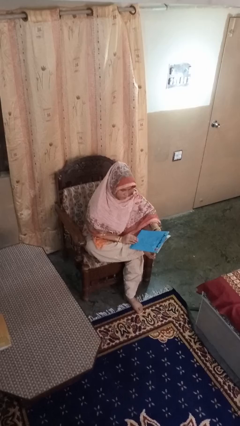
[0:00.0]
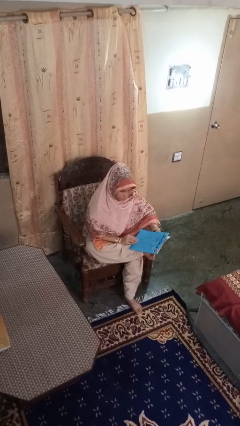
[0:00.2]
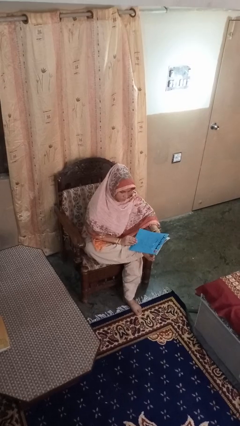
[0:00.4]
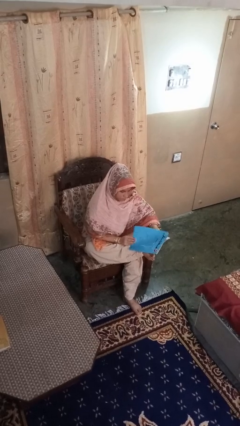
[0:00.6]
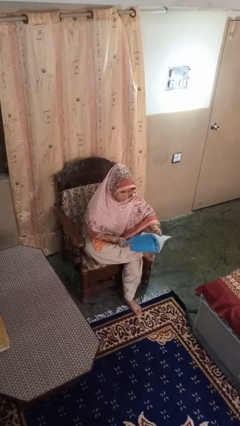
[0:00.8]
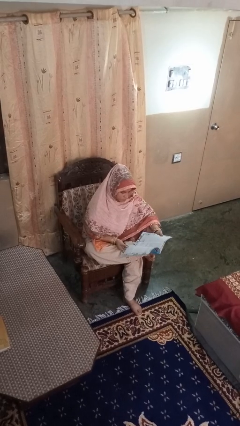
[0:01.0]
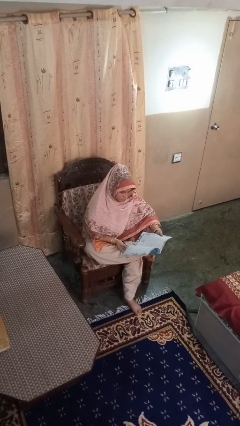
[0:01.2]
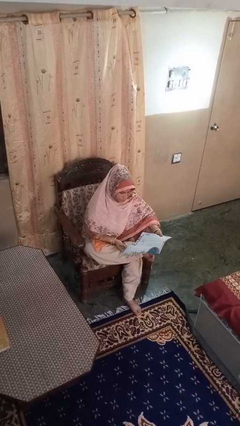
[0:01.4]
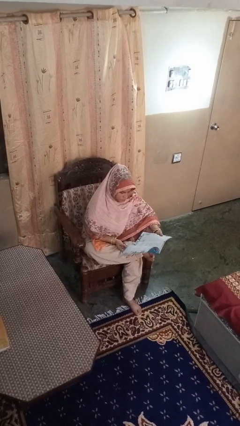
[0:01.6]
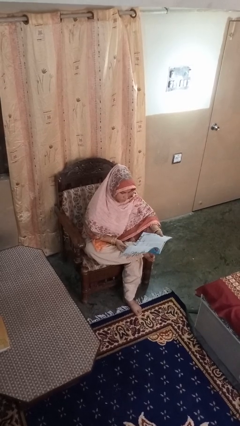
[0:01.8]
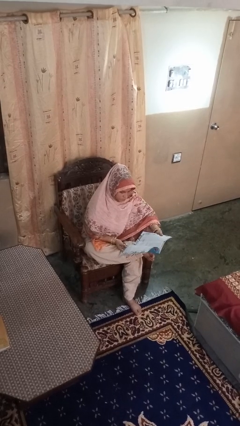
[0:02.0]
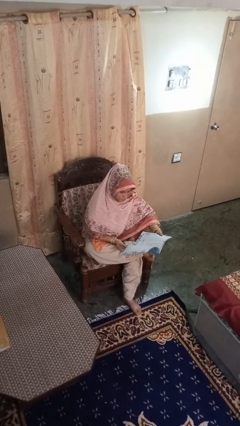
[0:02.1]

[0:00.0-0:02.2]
person reads magazine

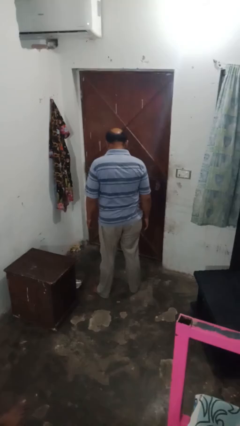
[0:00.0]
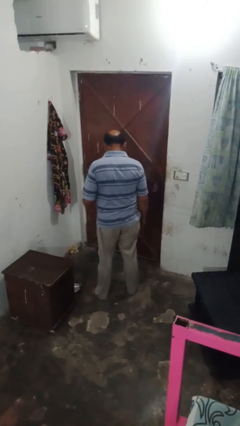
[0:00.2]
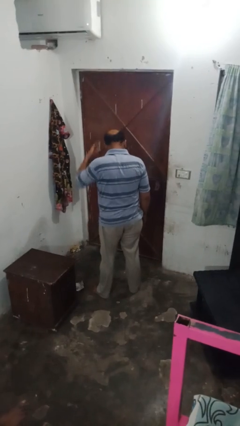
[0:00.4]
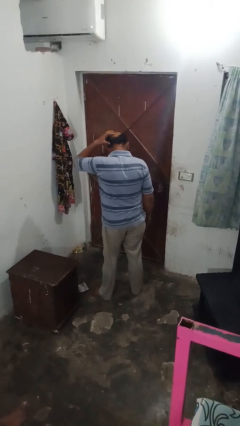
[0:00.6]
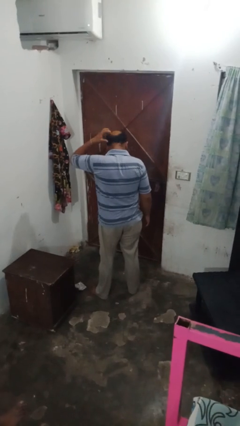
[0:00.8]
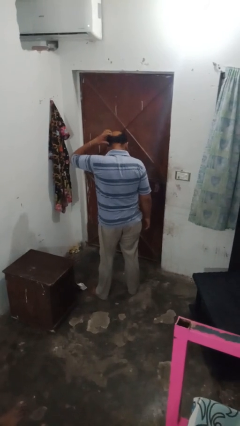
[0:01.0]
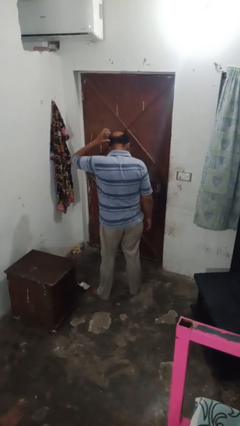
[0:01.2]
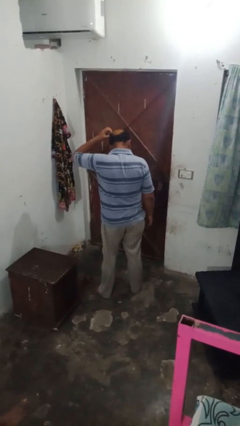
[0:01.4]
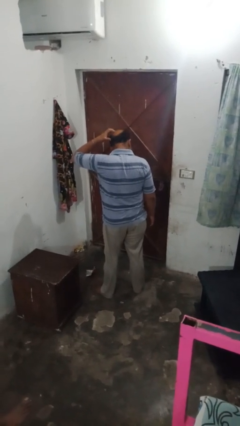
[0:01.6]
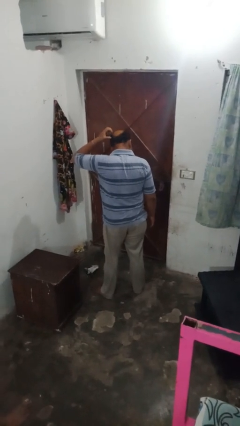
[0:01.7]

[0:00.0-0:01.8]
person strokes hair

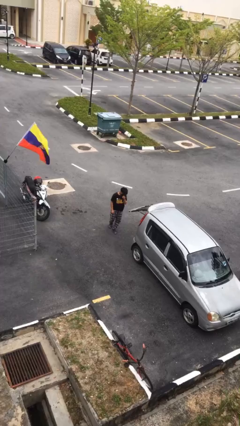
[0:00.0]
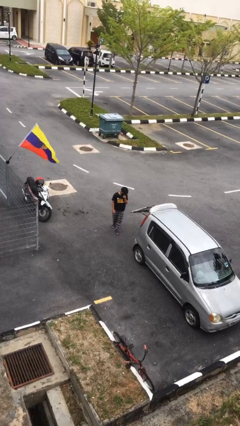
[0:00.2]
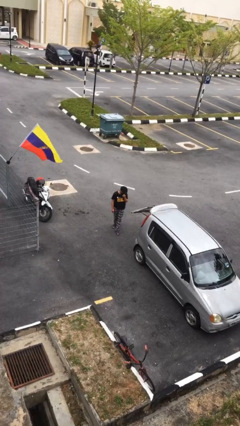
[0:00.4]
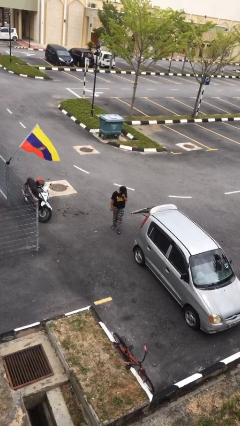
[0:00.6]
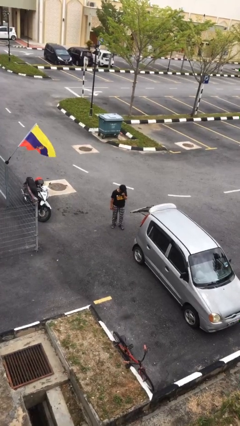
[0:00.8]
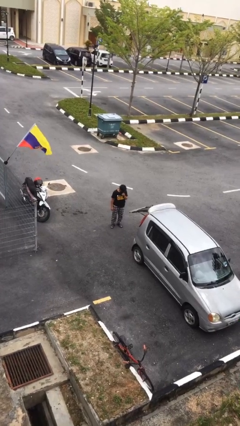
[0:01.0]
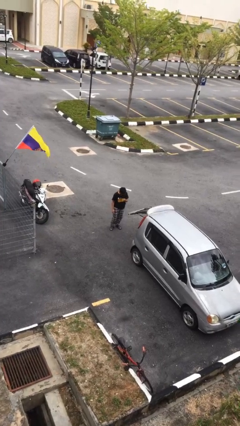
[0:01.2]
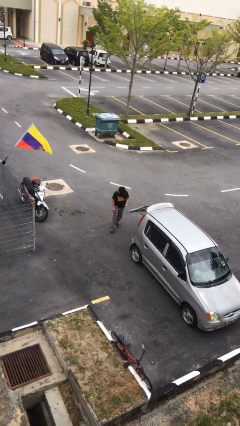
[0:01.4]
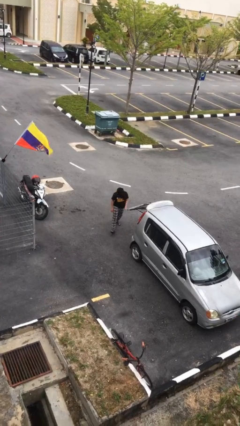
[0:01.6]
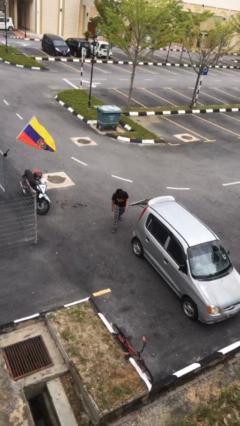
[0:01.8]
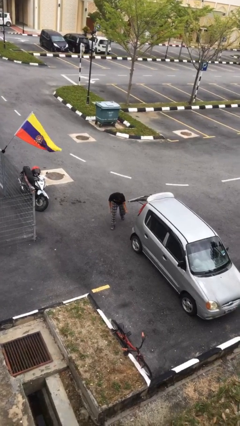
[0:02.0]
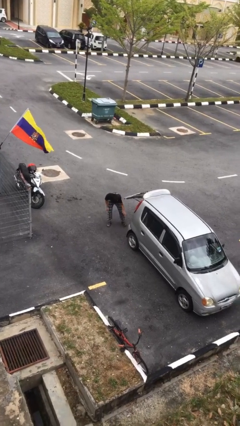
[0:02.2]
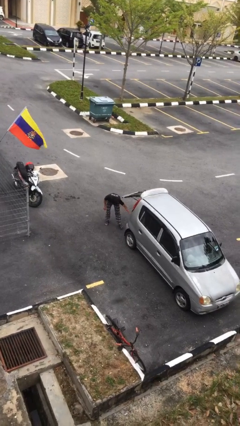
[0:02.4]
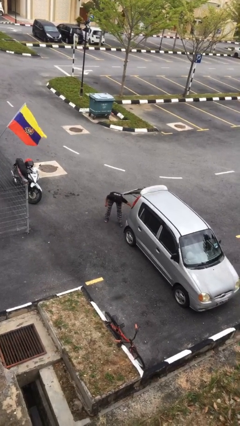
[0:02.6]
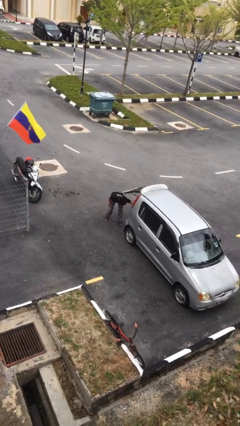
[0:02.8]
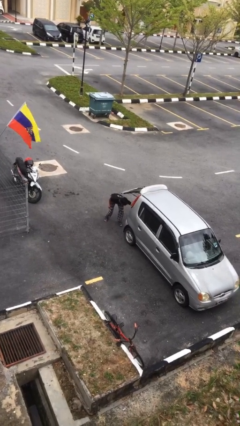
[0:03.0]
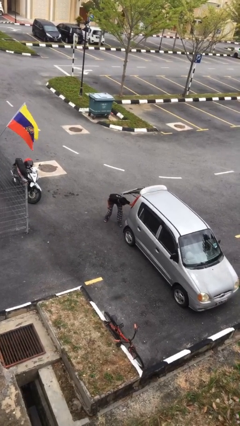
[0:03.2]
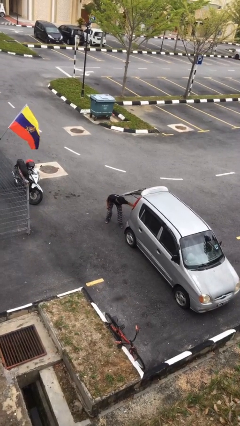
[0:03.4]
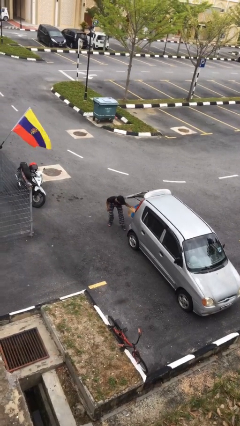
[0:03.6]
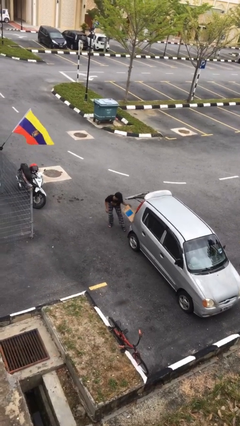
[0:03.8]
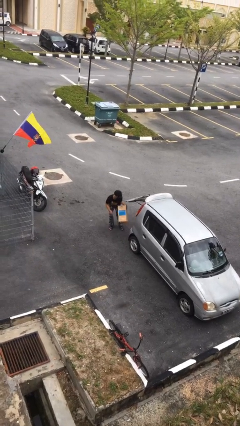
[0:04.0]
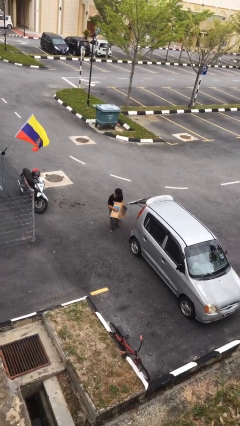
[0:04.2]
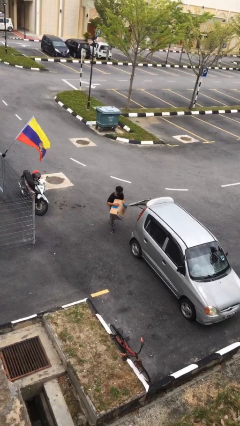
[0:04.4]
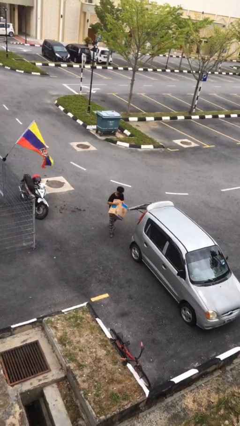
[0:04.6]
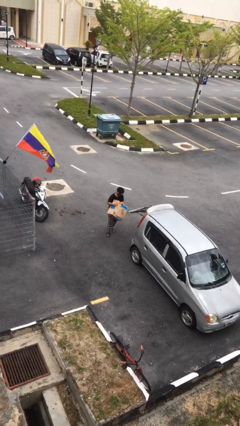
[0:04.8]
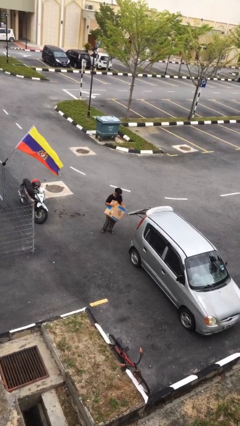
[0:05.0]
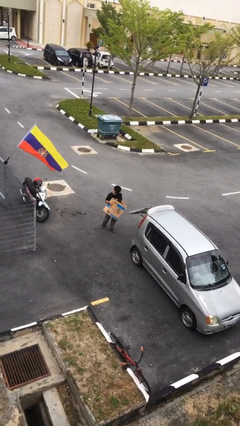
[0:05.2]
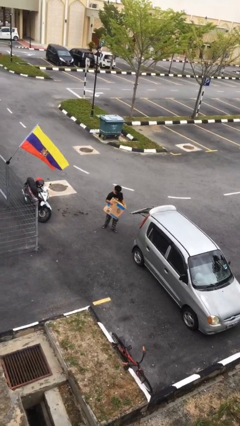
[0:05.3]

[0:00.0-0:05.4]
person unloads car

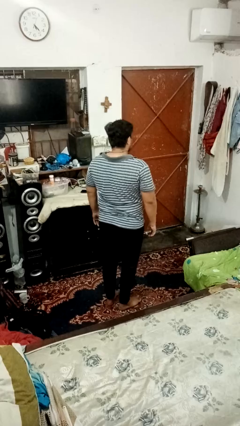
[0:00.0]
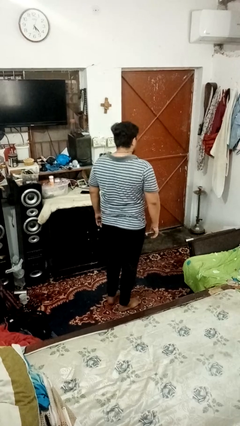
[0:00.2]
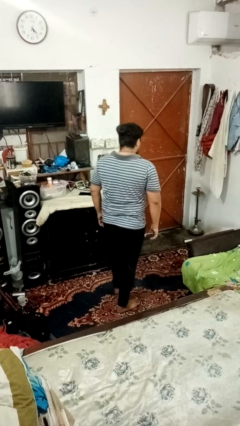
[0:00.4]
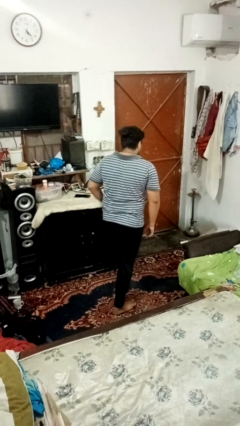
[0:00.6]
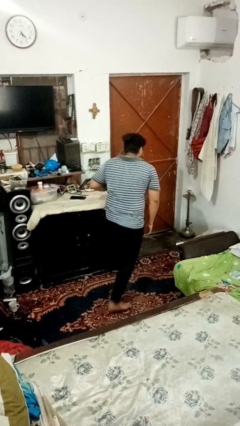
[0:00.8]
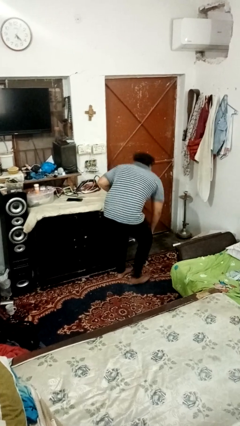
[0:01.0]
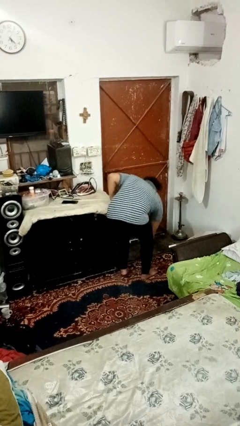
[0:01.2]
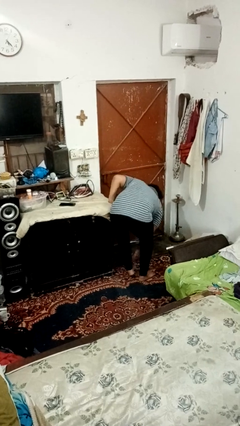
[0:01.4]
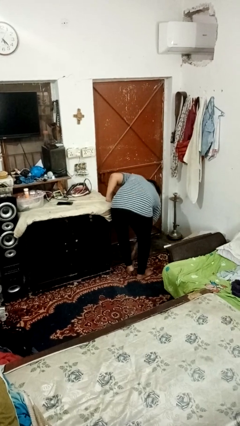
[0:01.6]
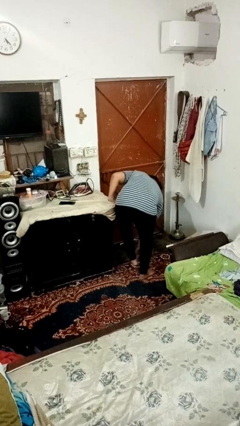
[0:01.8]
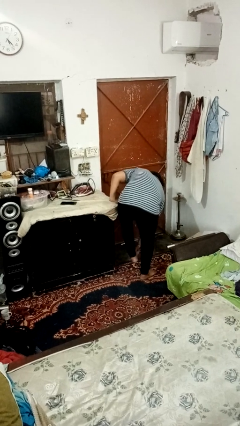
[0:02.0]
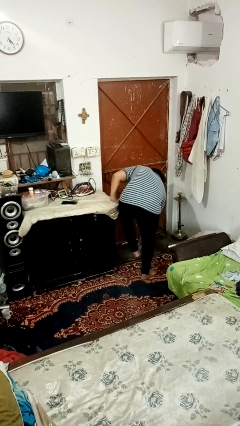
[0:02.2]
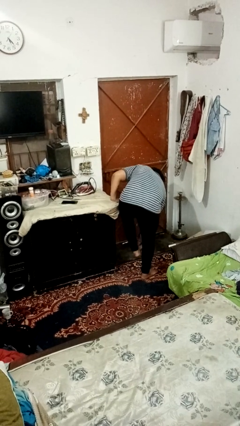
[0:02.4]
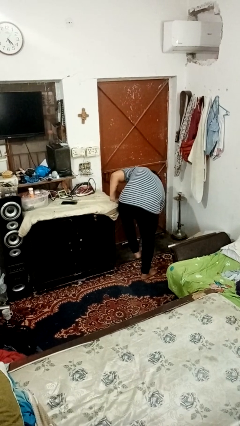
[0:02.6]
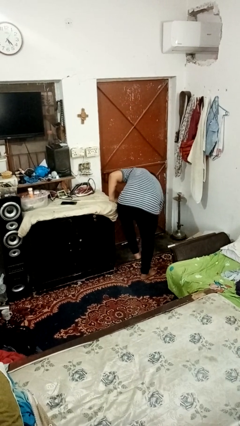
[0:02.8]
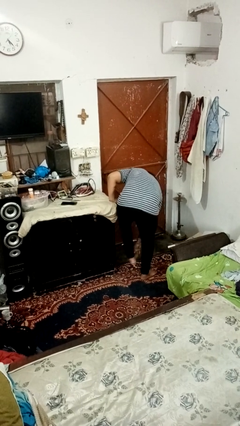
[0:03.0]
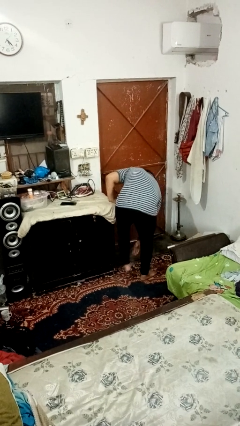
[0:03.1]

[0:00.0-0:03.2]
person stubs toe

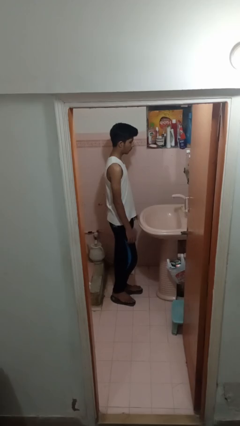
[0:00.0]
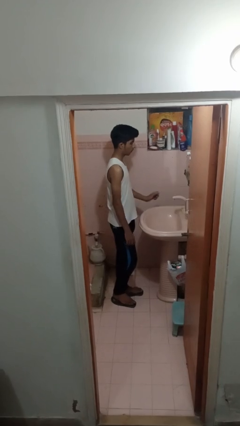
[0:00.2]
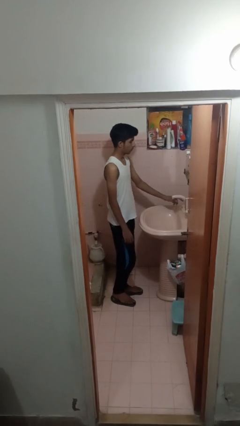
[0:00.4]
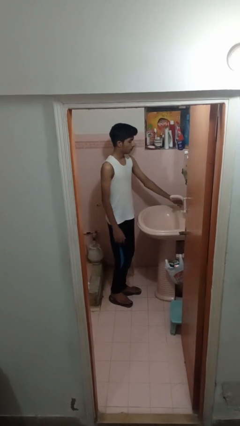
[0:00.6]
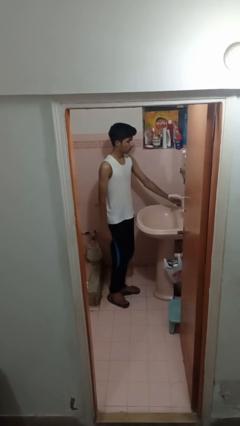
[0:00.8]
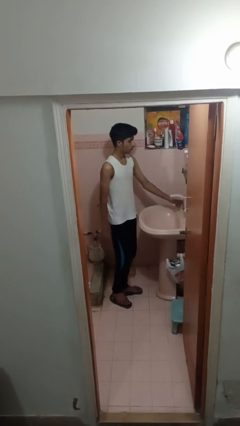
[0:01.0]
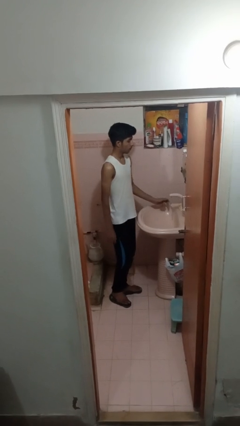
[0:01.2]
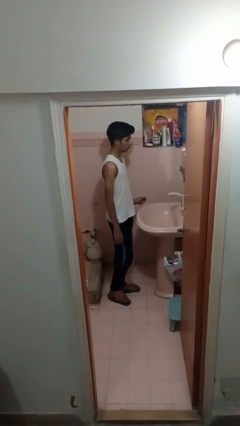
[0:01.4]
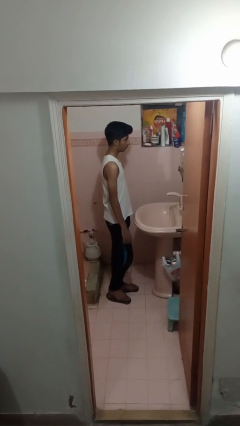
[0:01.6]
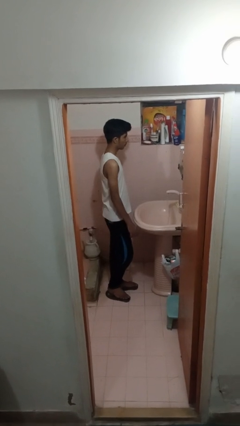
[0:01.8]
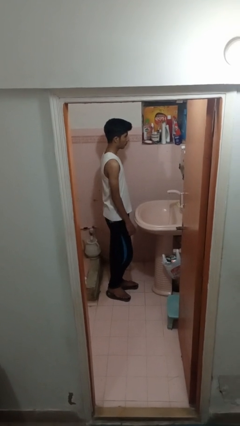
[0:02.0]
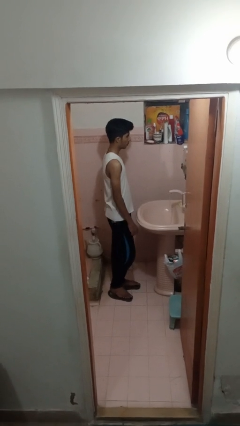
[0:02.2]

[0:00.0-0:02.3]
person turns on faucet

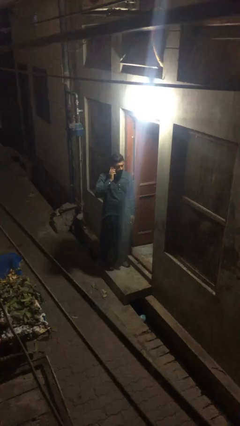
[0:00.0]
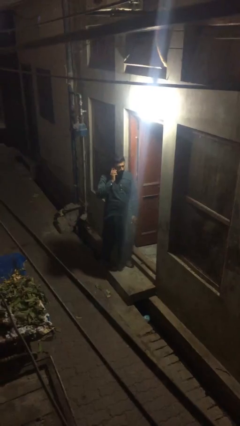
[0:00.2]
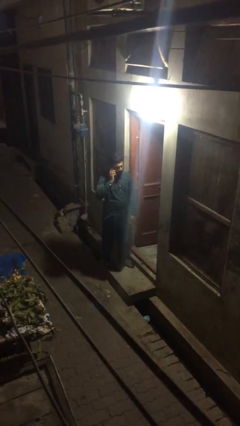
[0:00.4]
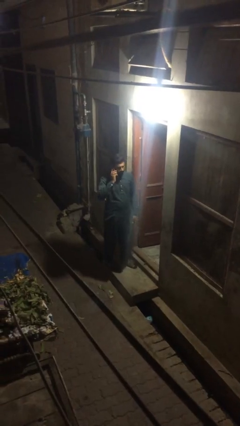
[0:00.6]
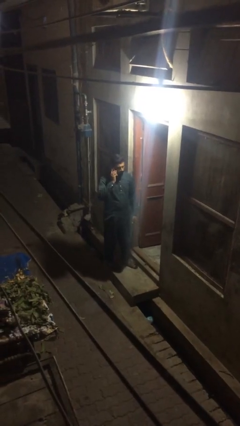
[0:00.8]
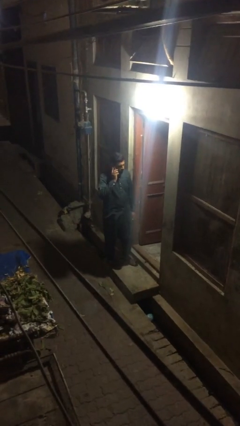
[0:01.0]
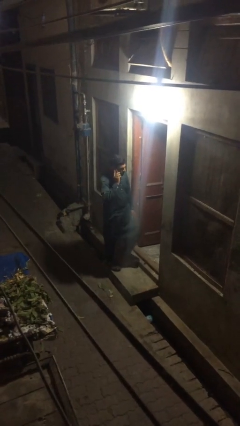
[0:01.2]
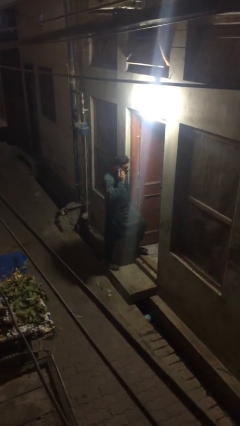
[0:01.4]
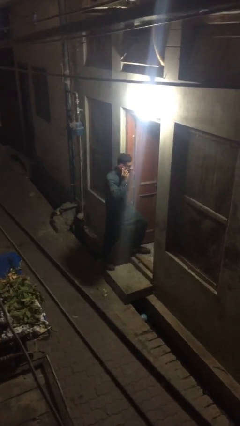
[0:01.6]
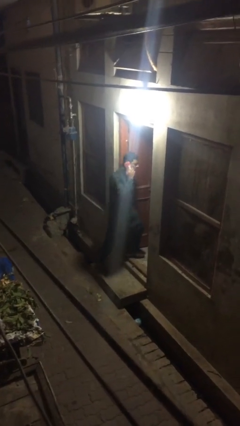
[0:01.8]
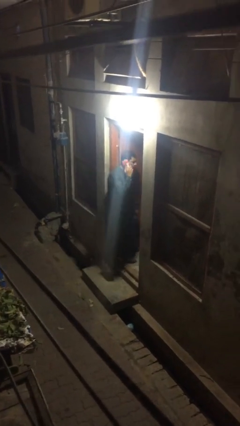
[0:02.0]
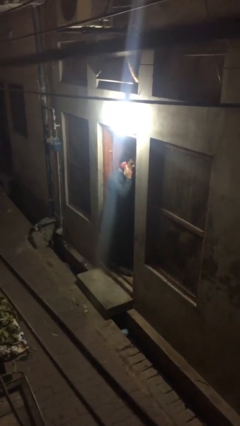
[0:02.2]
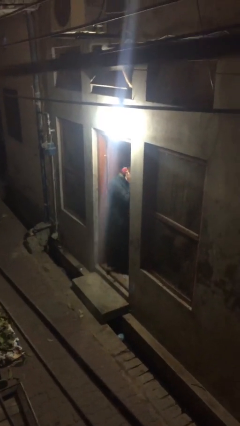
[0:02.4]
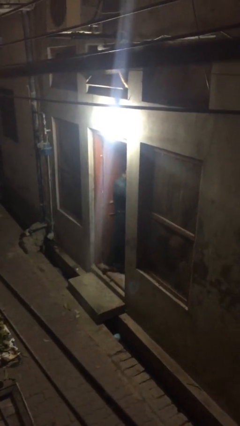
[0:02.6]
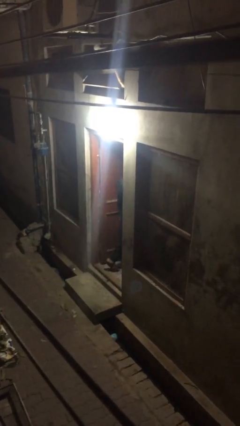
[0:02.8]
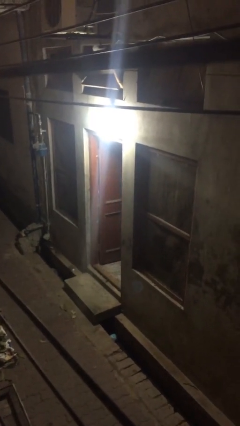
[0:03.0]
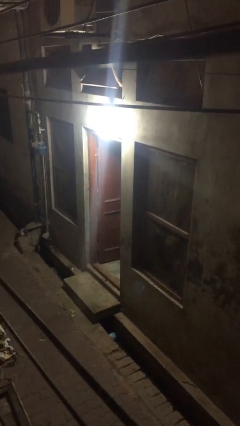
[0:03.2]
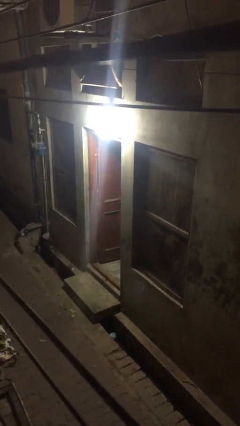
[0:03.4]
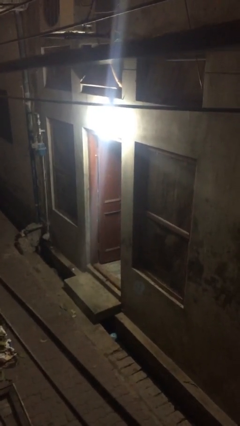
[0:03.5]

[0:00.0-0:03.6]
person exits scene through structure
